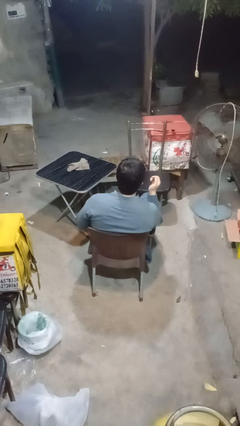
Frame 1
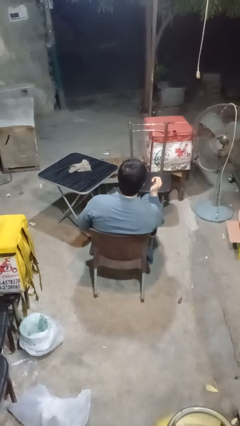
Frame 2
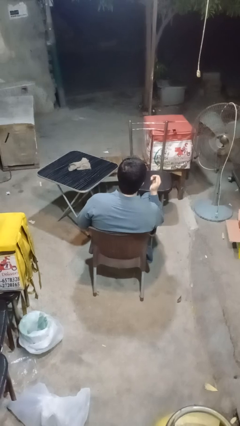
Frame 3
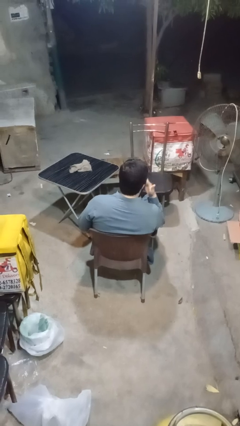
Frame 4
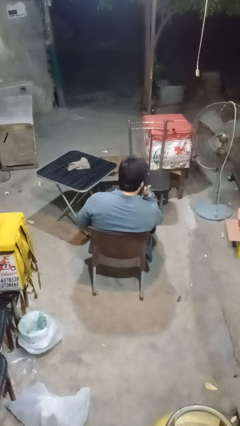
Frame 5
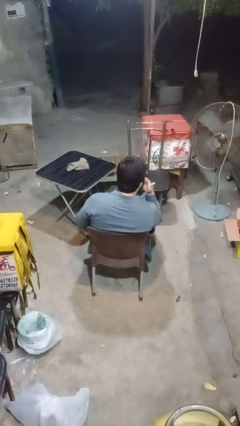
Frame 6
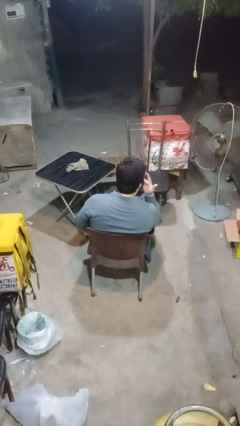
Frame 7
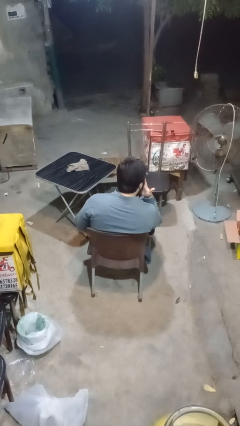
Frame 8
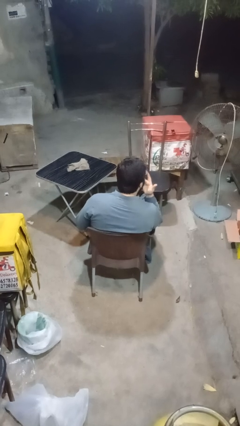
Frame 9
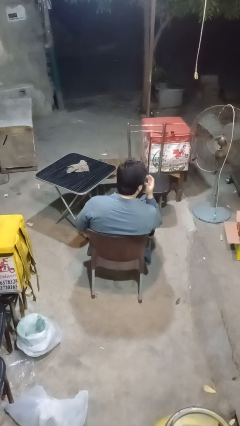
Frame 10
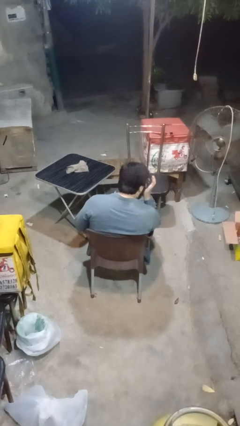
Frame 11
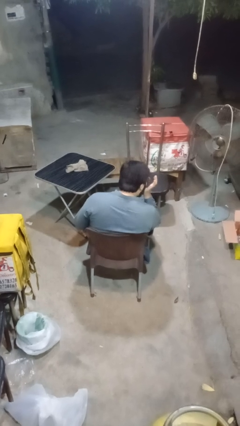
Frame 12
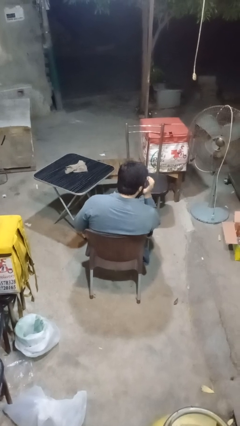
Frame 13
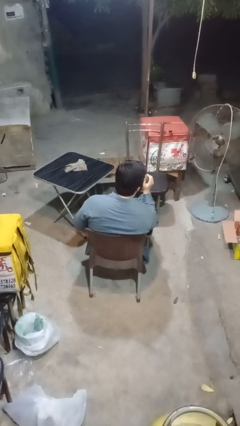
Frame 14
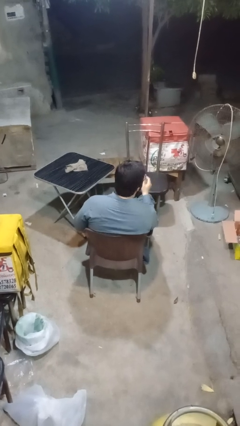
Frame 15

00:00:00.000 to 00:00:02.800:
person licks fingers

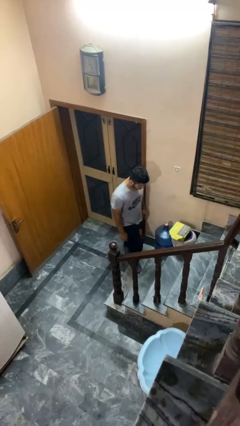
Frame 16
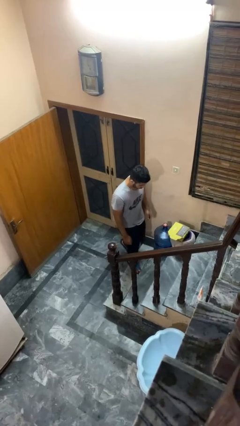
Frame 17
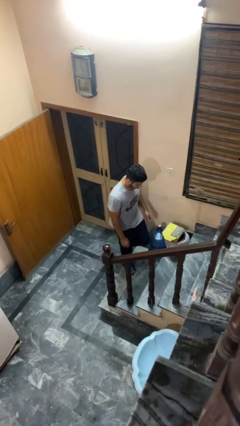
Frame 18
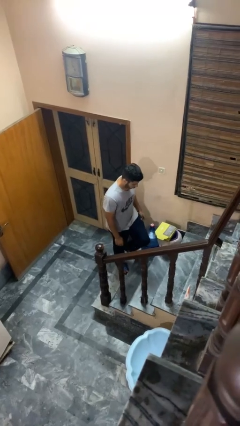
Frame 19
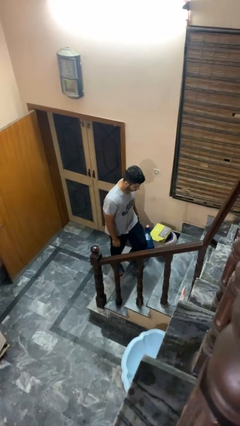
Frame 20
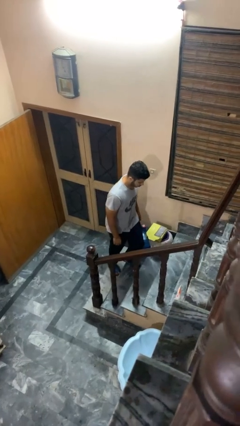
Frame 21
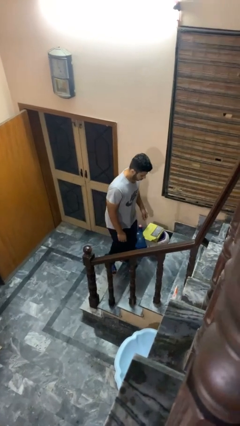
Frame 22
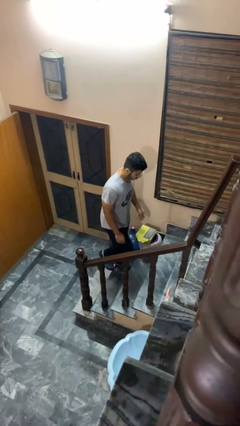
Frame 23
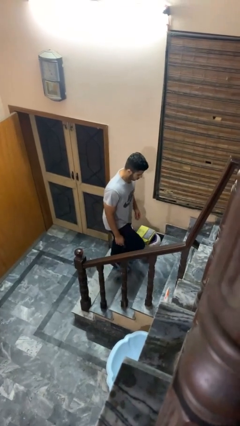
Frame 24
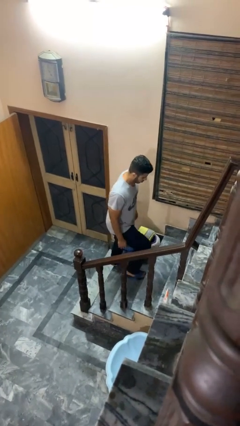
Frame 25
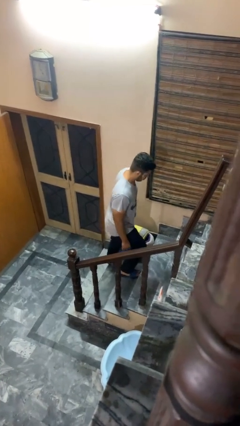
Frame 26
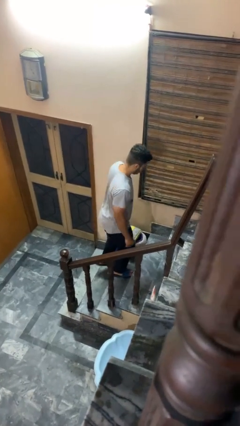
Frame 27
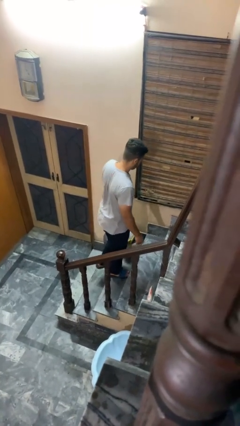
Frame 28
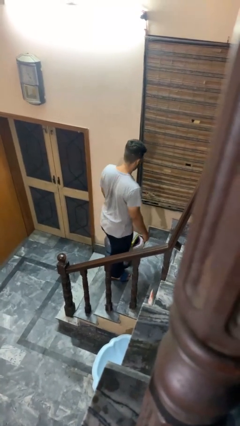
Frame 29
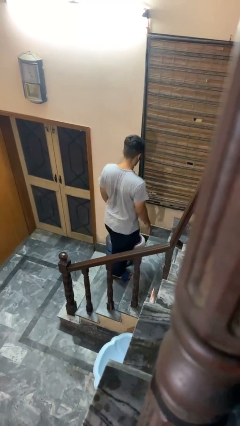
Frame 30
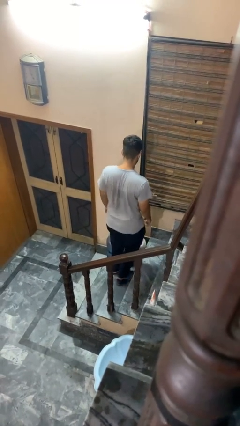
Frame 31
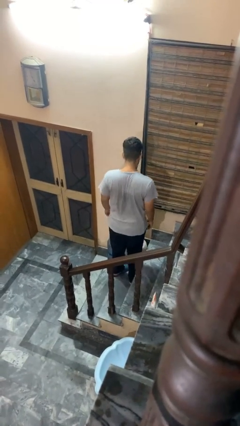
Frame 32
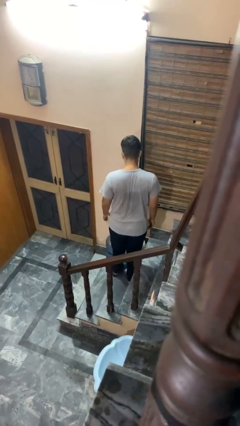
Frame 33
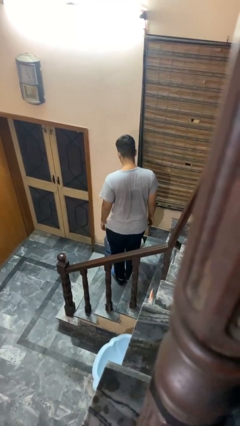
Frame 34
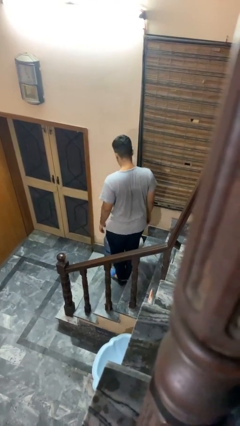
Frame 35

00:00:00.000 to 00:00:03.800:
person climbs up stairs

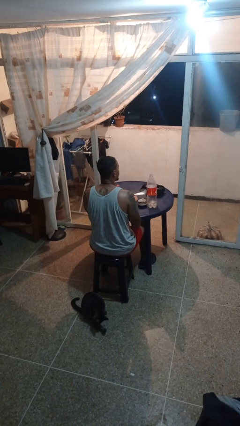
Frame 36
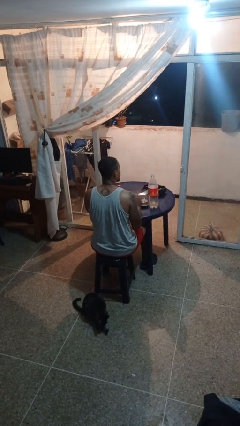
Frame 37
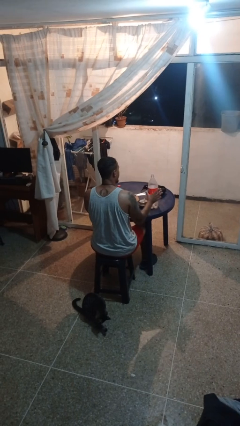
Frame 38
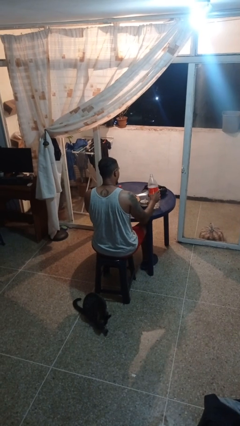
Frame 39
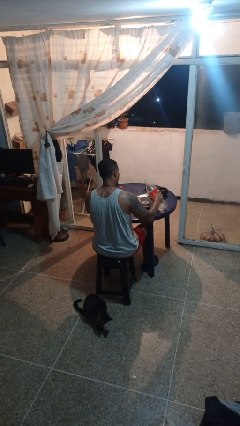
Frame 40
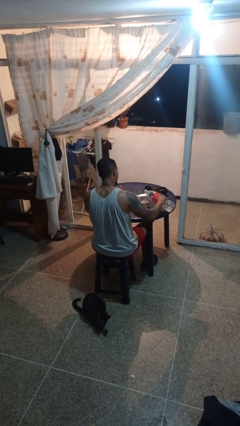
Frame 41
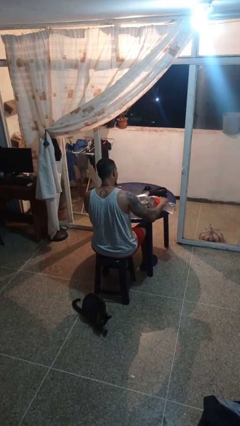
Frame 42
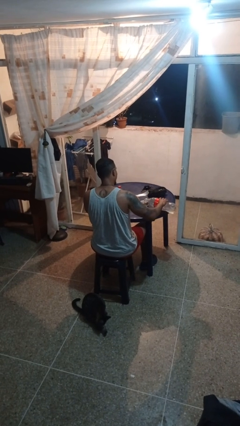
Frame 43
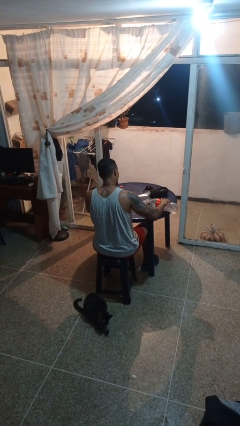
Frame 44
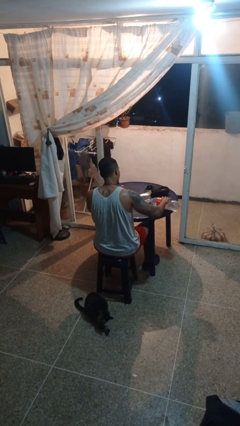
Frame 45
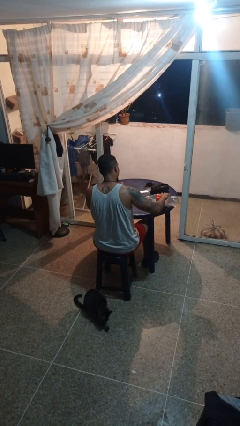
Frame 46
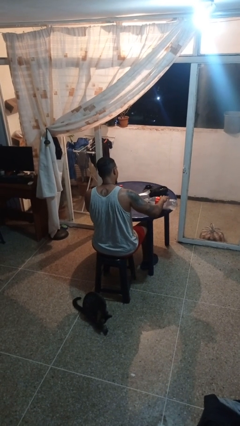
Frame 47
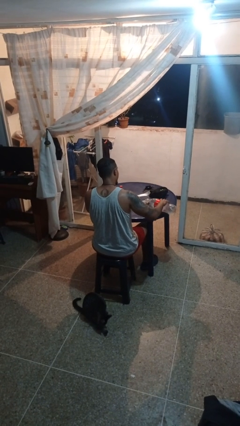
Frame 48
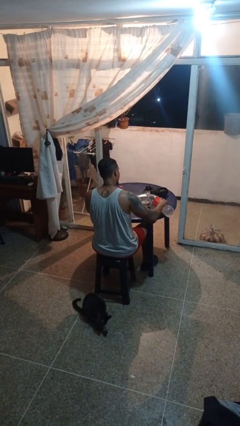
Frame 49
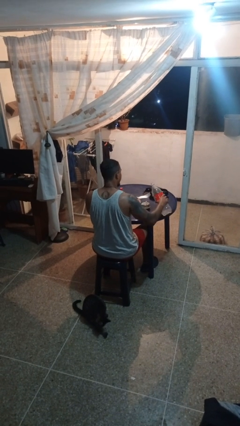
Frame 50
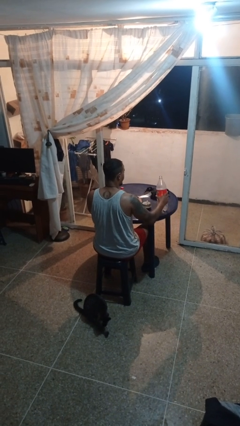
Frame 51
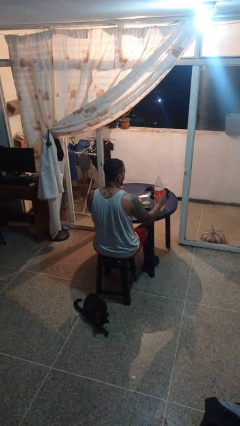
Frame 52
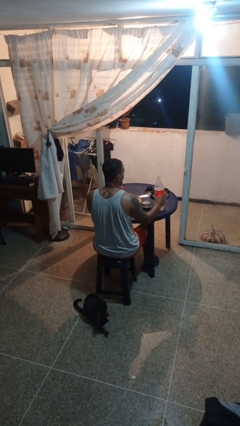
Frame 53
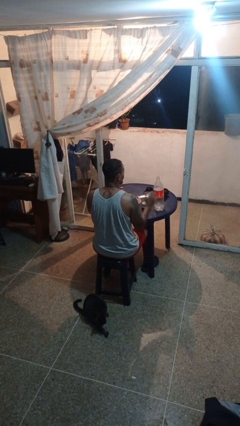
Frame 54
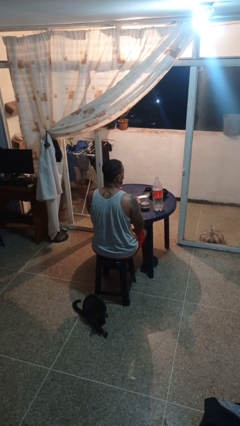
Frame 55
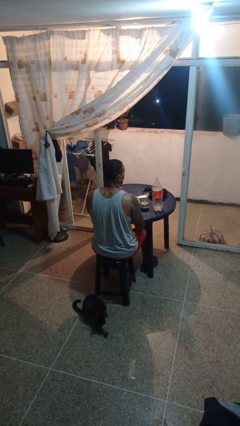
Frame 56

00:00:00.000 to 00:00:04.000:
person pours liquid into cup

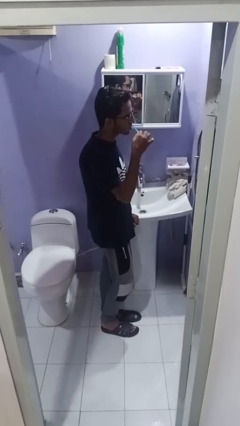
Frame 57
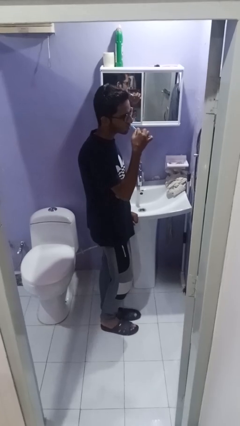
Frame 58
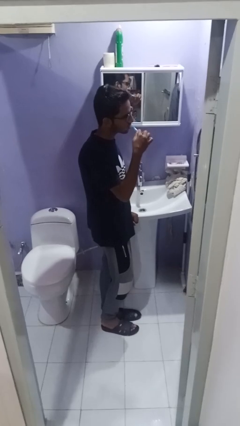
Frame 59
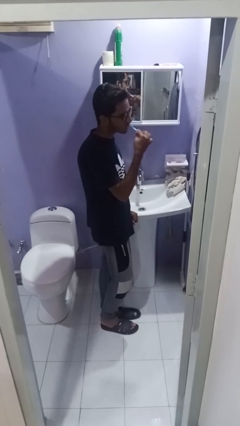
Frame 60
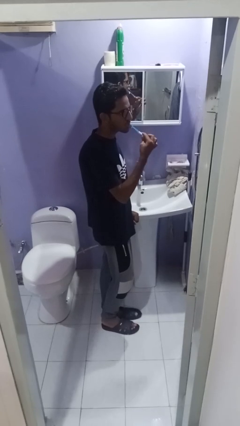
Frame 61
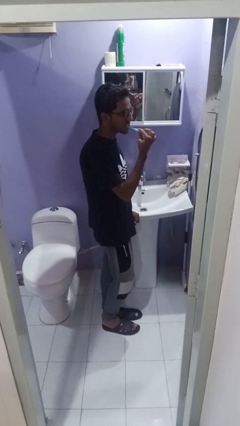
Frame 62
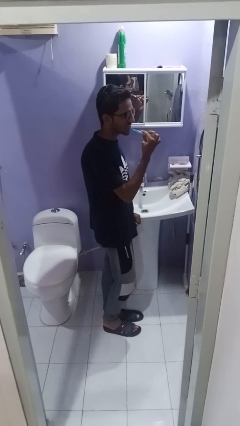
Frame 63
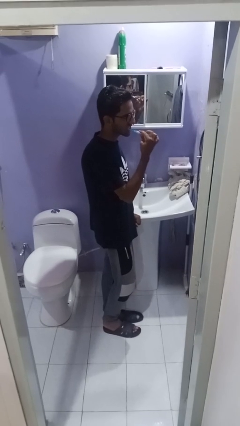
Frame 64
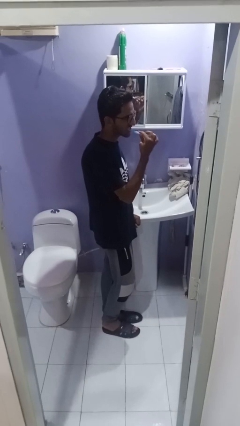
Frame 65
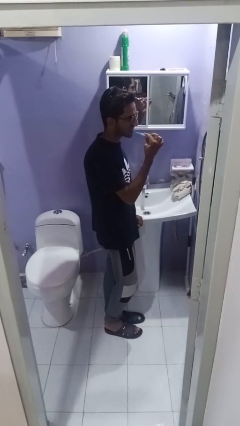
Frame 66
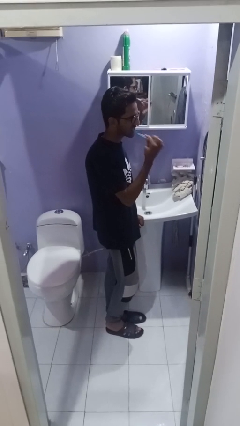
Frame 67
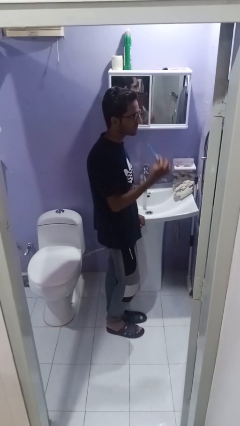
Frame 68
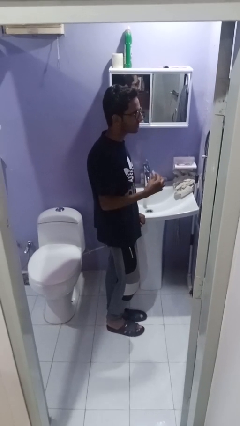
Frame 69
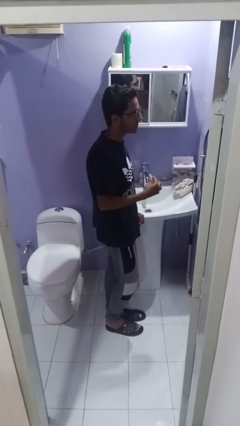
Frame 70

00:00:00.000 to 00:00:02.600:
person brushes teeth

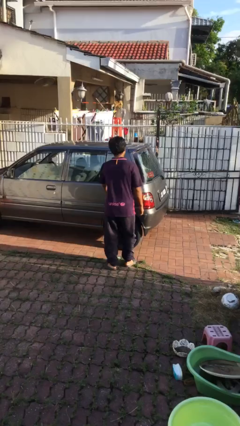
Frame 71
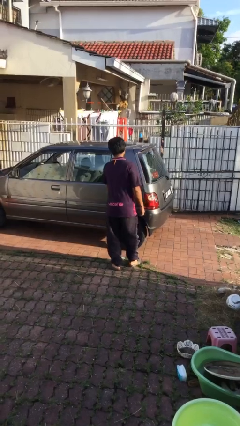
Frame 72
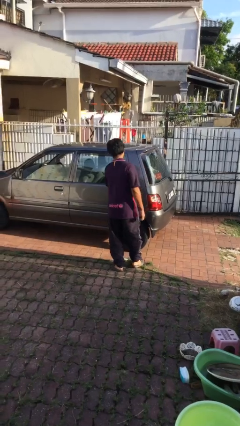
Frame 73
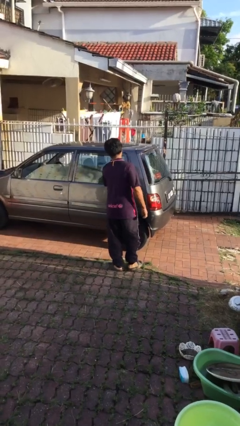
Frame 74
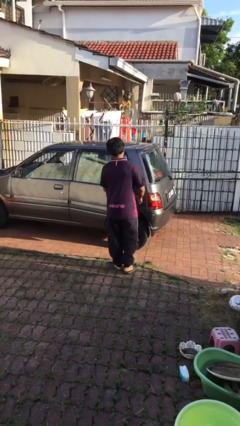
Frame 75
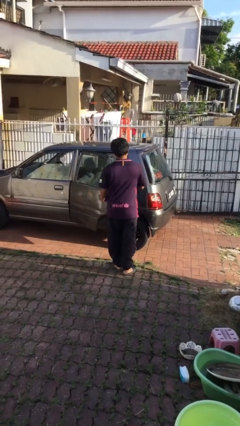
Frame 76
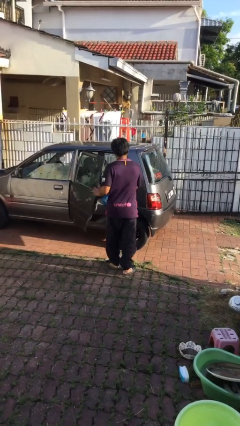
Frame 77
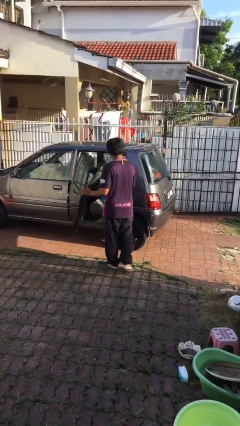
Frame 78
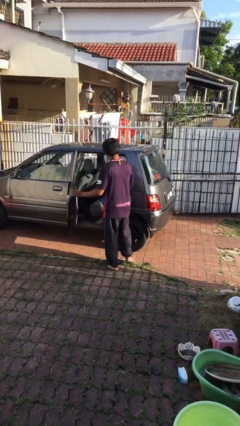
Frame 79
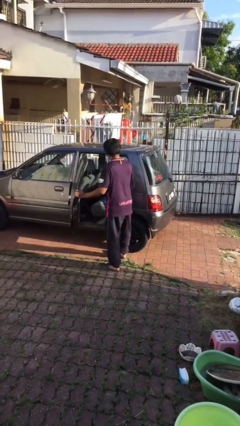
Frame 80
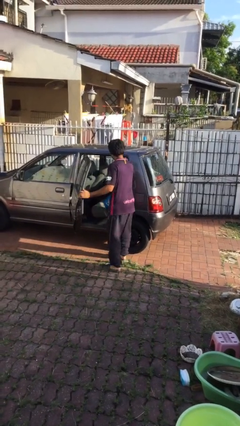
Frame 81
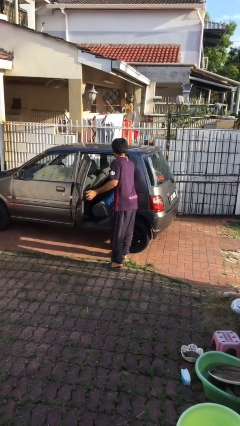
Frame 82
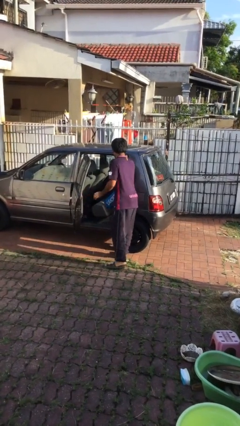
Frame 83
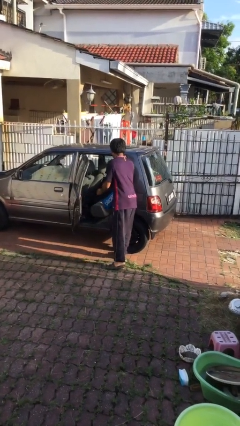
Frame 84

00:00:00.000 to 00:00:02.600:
person opens car door

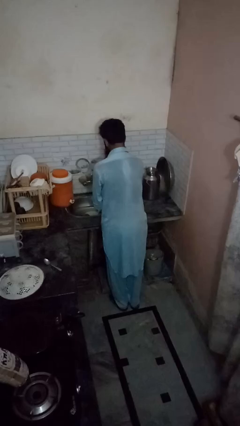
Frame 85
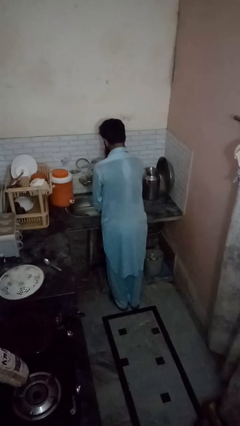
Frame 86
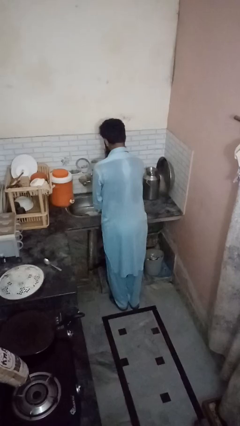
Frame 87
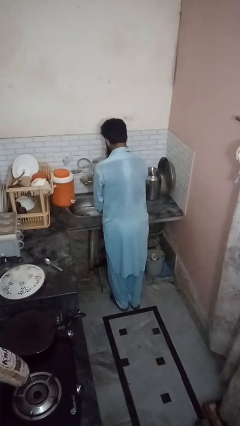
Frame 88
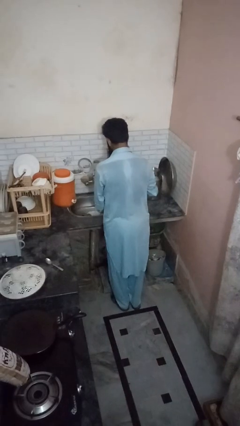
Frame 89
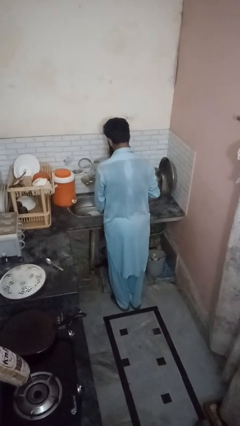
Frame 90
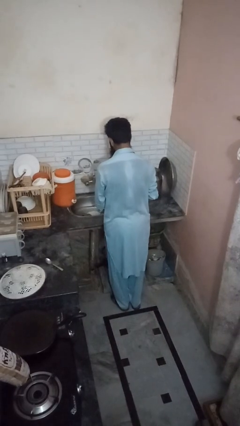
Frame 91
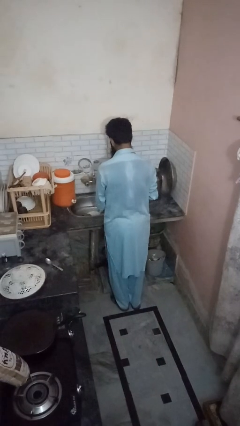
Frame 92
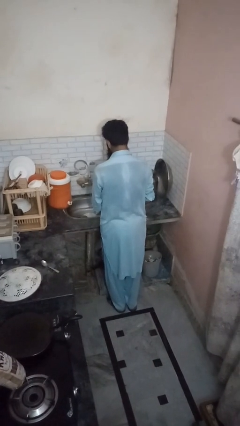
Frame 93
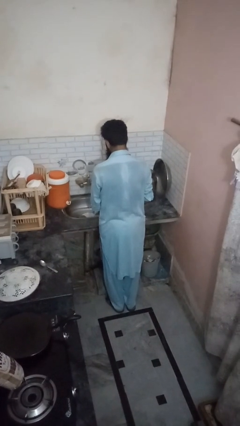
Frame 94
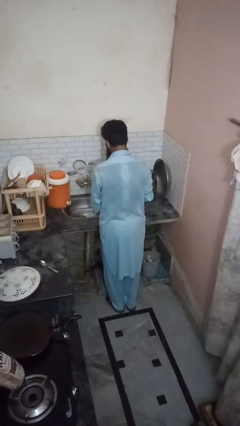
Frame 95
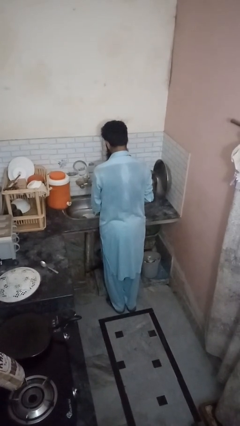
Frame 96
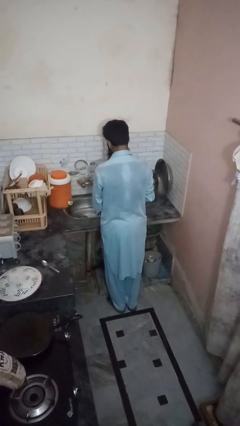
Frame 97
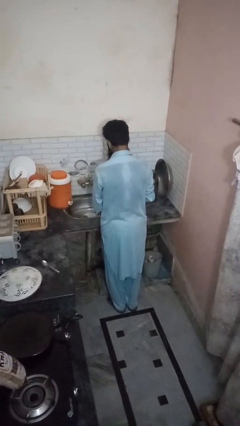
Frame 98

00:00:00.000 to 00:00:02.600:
person opens dishwasher
